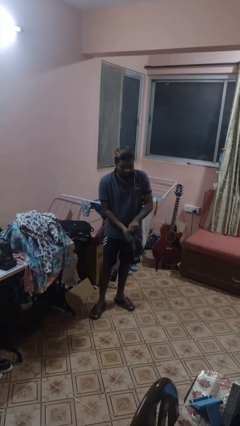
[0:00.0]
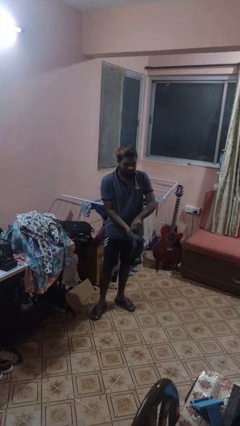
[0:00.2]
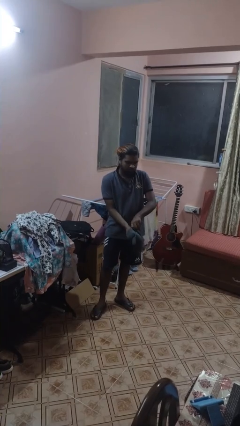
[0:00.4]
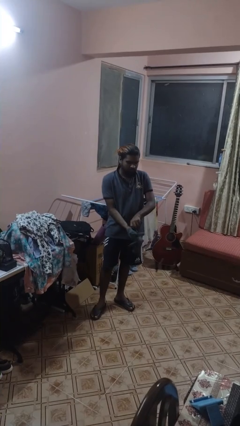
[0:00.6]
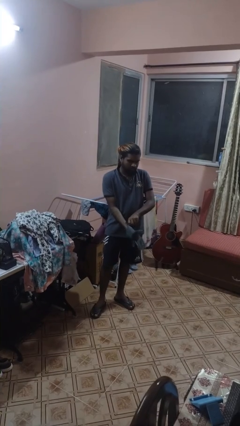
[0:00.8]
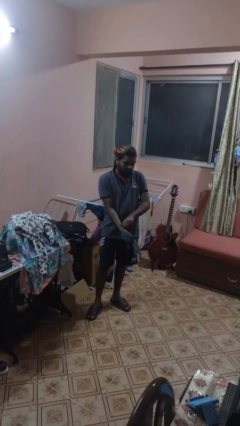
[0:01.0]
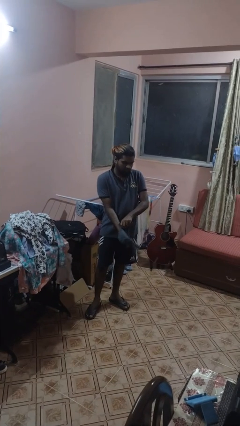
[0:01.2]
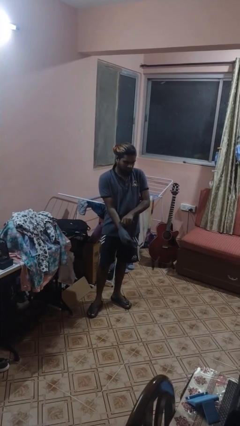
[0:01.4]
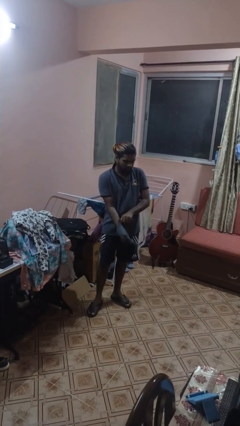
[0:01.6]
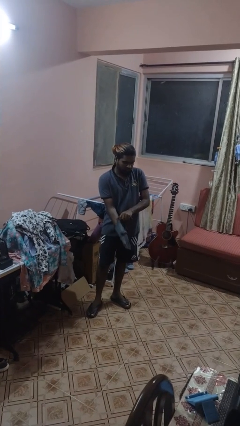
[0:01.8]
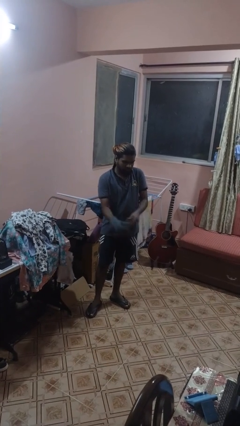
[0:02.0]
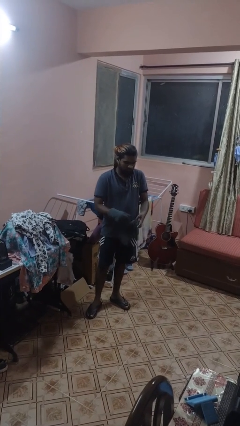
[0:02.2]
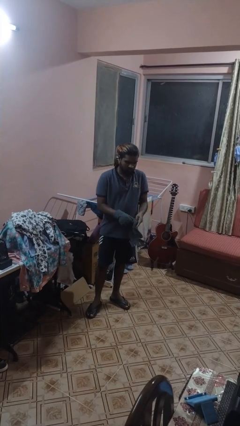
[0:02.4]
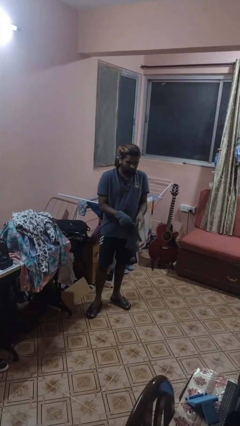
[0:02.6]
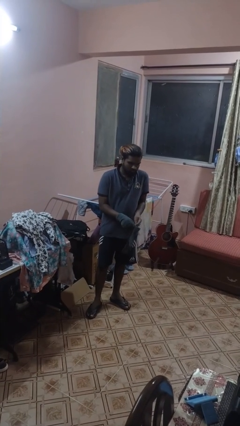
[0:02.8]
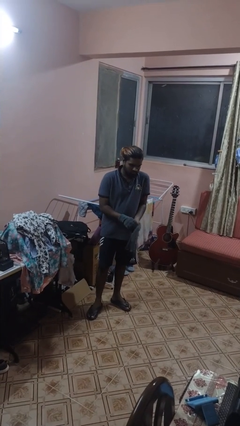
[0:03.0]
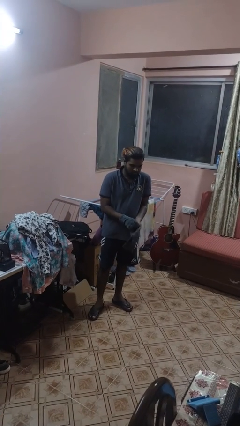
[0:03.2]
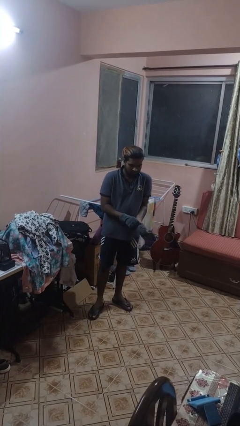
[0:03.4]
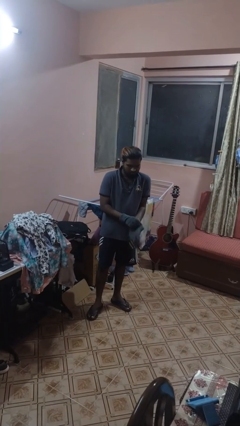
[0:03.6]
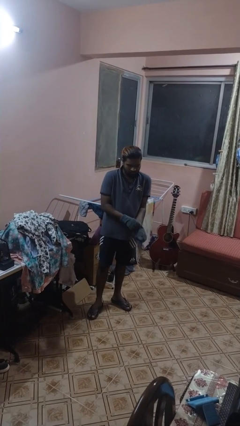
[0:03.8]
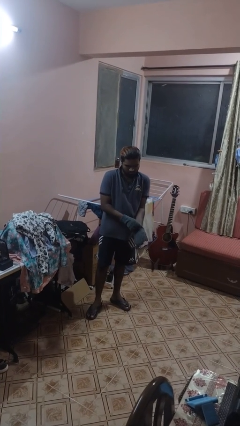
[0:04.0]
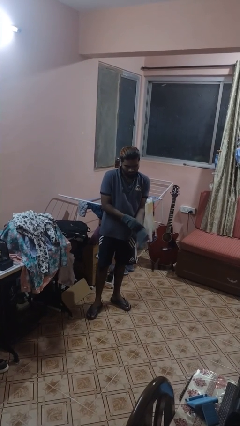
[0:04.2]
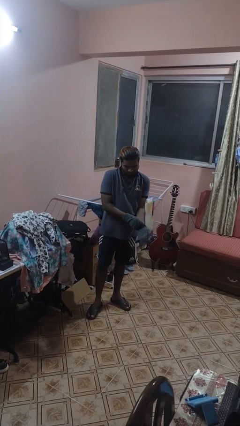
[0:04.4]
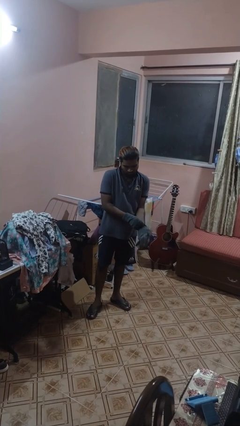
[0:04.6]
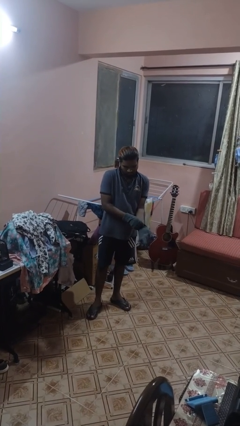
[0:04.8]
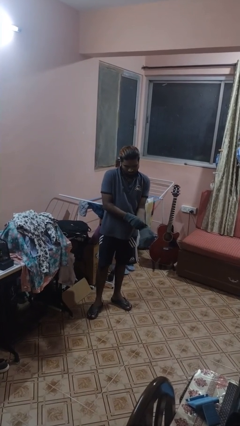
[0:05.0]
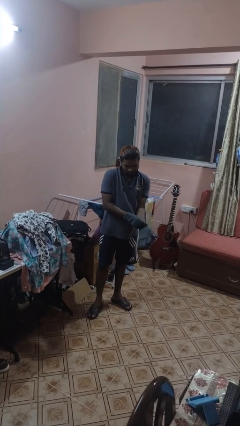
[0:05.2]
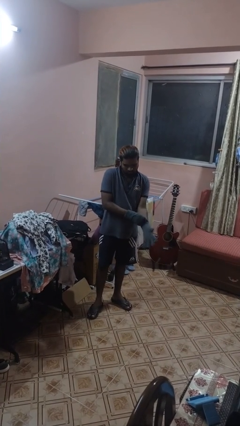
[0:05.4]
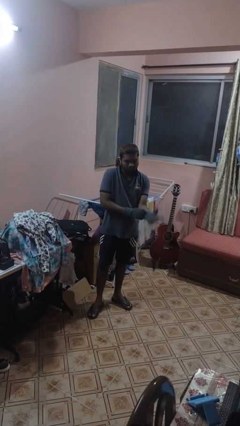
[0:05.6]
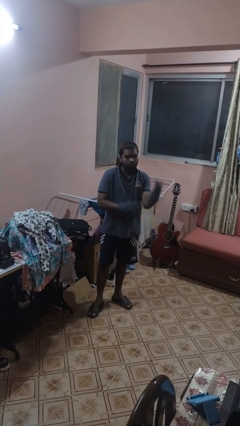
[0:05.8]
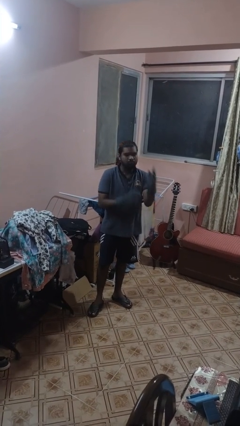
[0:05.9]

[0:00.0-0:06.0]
person puts on gloves

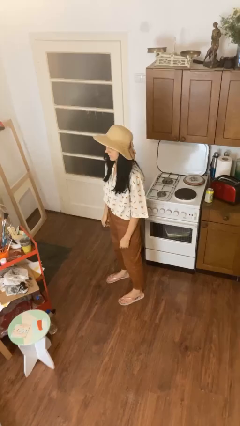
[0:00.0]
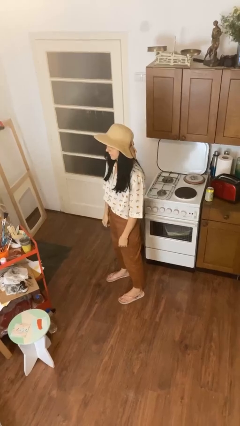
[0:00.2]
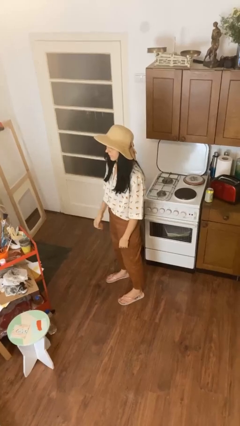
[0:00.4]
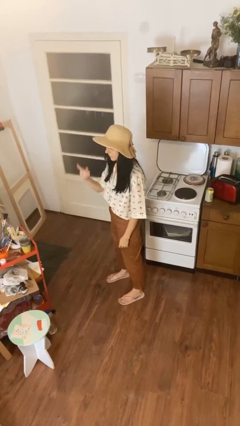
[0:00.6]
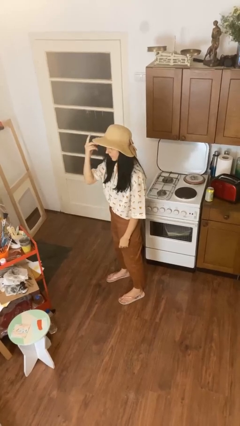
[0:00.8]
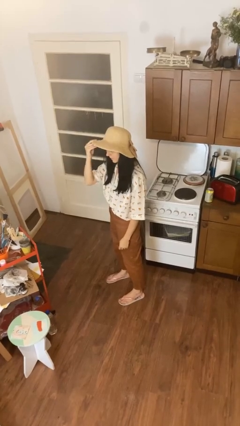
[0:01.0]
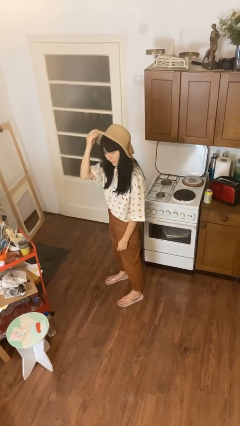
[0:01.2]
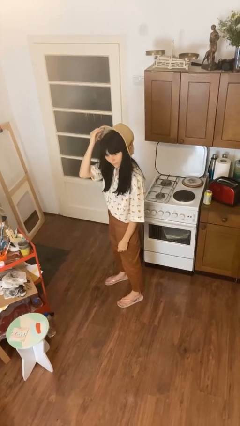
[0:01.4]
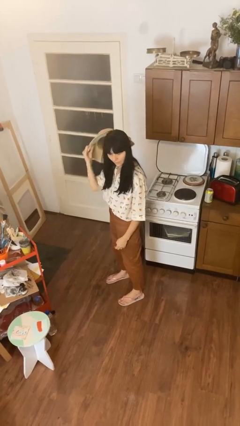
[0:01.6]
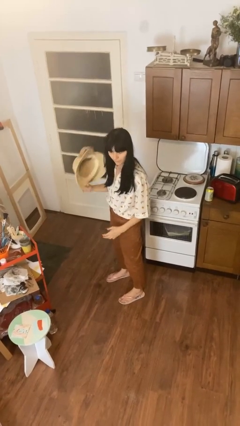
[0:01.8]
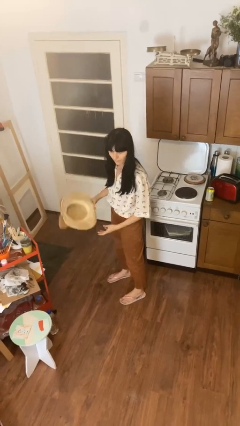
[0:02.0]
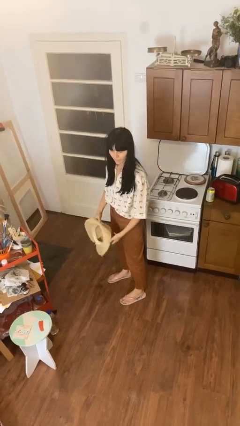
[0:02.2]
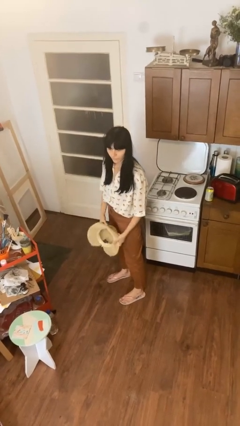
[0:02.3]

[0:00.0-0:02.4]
person takes off hat

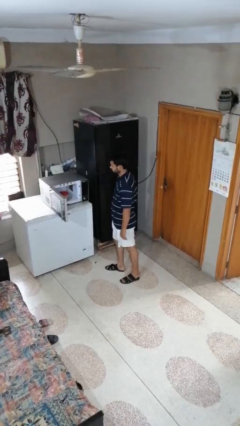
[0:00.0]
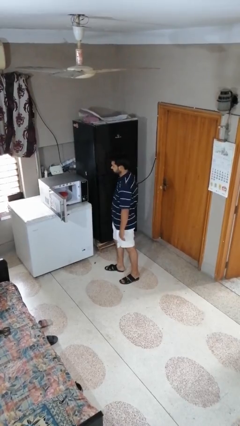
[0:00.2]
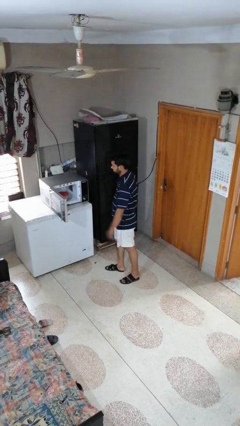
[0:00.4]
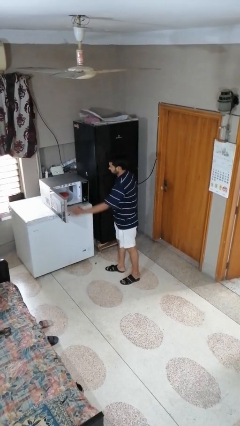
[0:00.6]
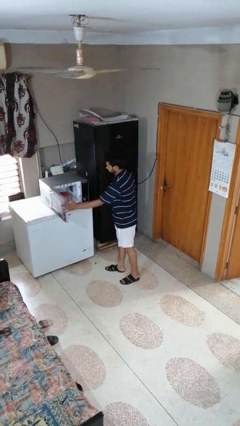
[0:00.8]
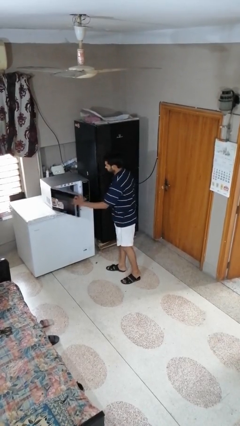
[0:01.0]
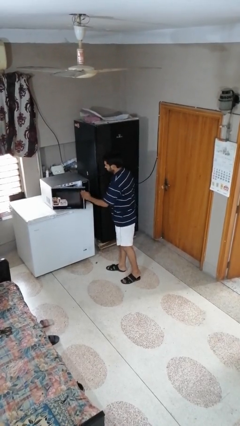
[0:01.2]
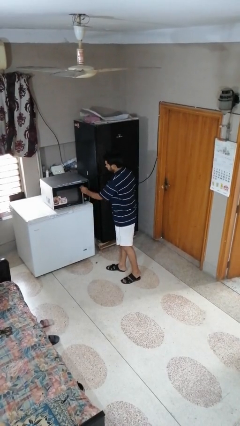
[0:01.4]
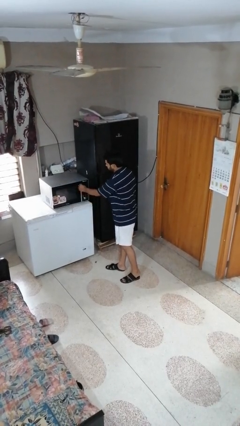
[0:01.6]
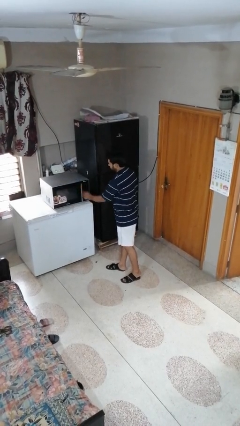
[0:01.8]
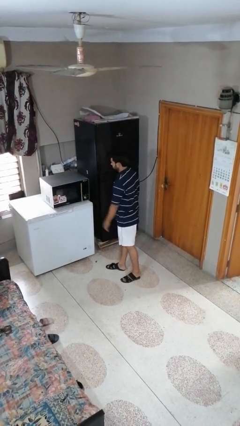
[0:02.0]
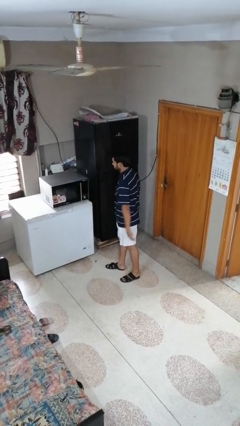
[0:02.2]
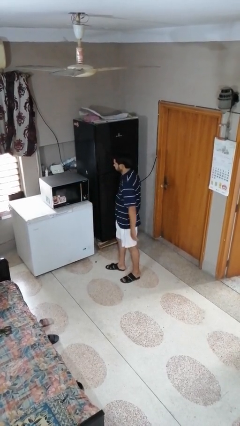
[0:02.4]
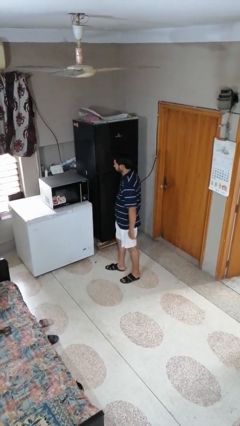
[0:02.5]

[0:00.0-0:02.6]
person closes microwave

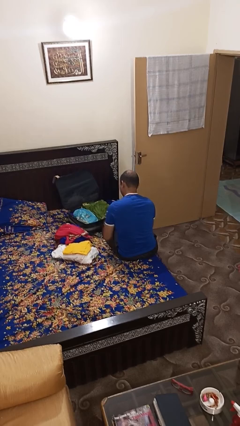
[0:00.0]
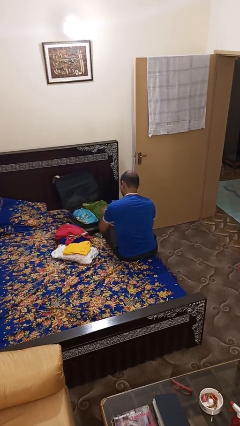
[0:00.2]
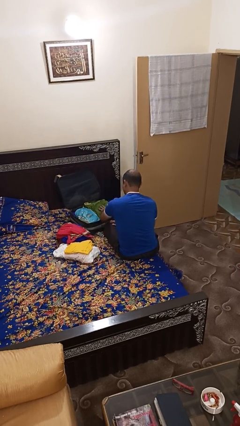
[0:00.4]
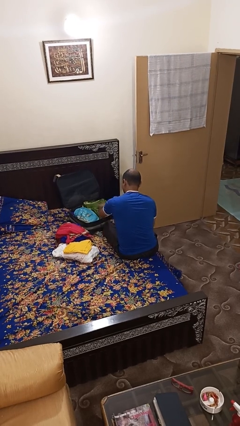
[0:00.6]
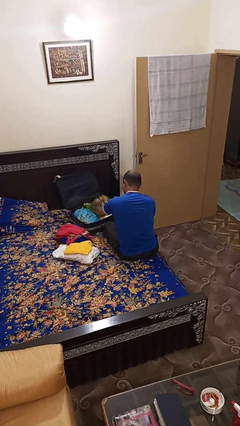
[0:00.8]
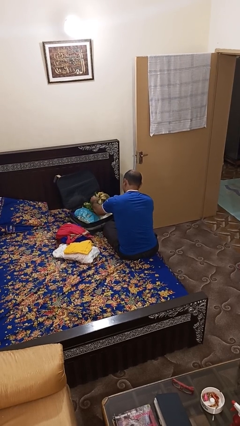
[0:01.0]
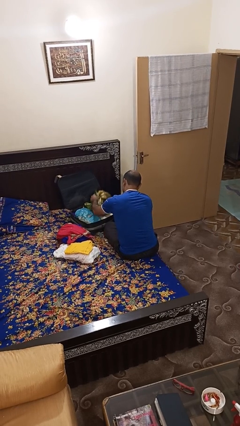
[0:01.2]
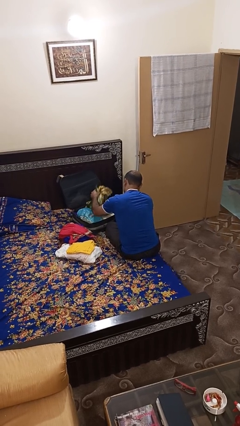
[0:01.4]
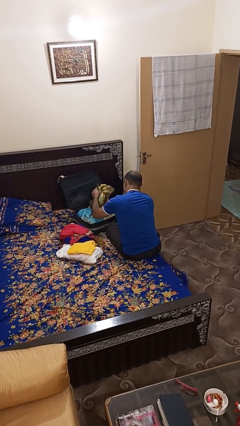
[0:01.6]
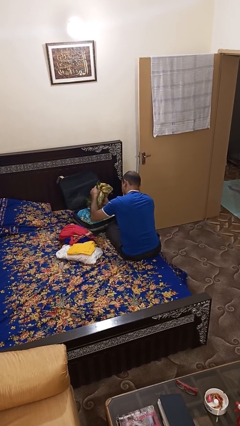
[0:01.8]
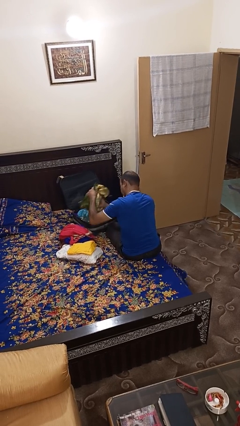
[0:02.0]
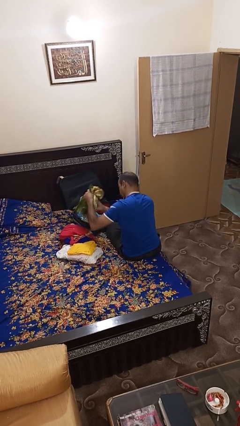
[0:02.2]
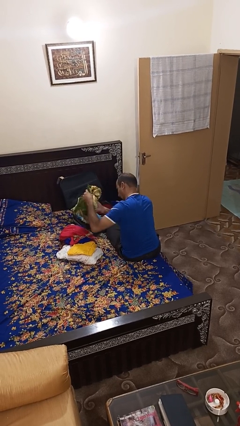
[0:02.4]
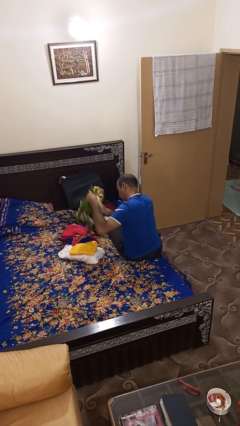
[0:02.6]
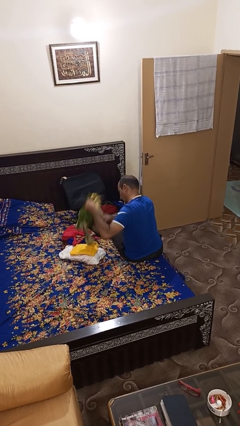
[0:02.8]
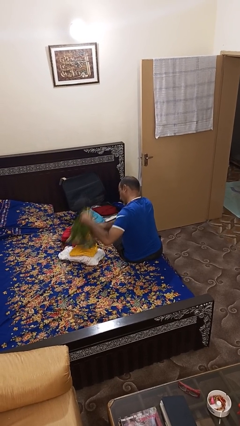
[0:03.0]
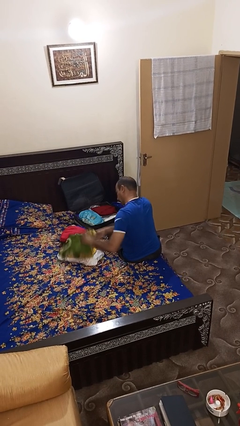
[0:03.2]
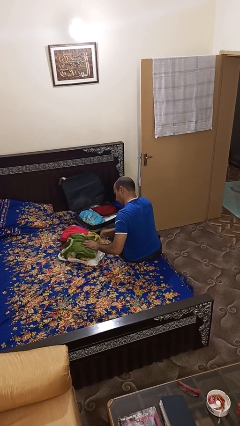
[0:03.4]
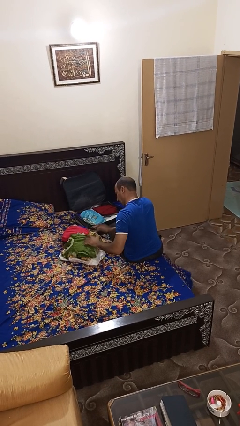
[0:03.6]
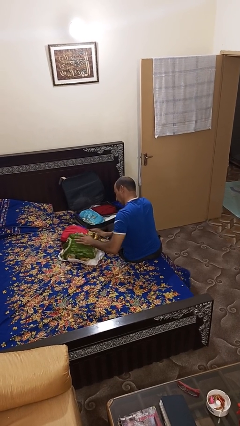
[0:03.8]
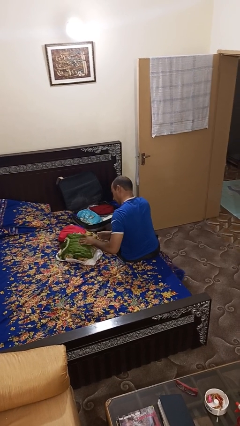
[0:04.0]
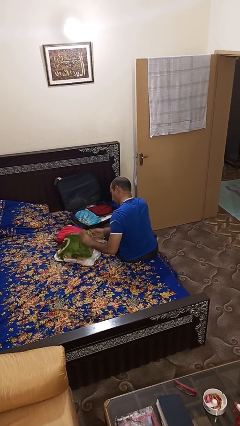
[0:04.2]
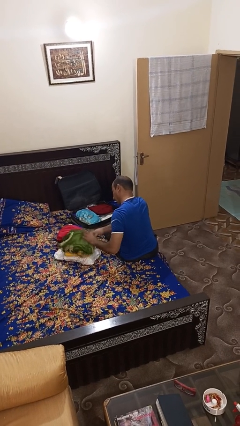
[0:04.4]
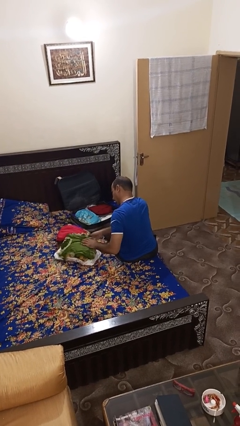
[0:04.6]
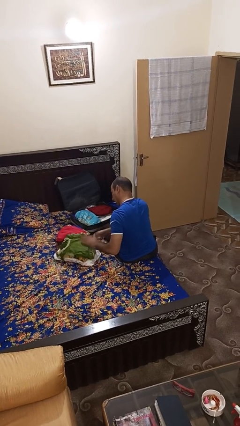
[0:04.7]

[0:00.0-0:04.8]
person unloads clothes from suitcase

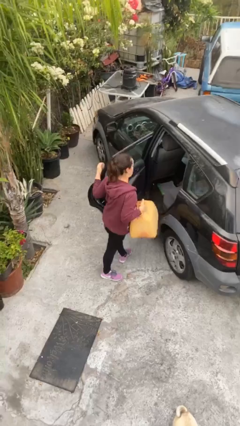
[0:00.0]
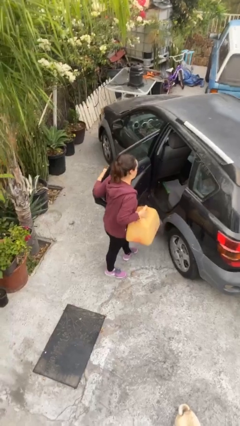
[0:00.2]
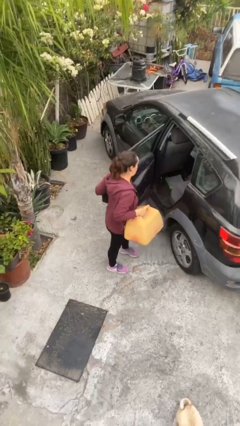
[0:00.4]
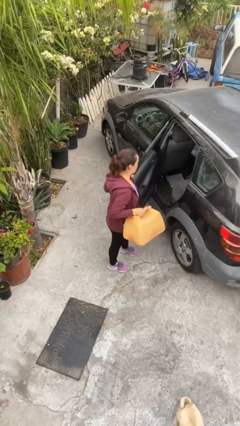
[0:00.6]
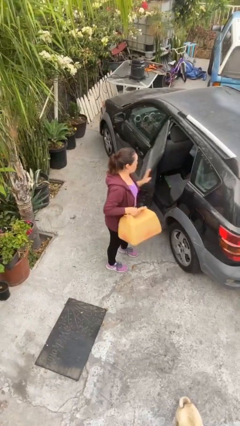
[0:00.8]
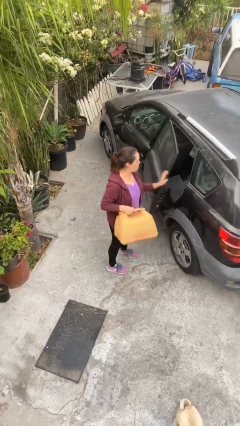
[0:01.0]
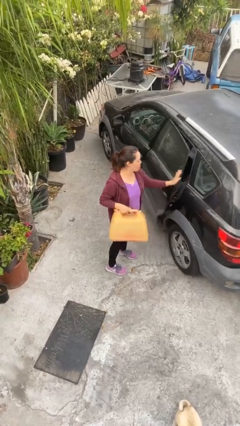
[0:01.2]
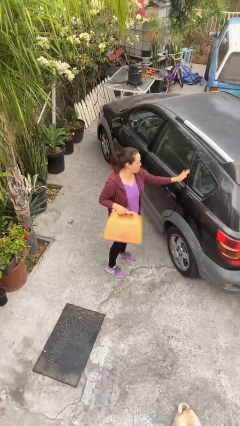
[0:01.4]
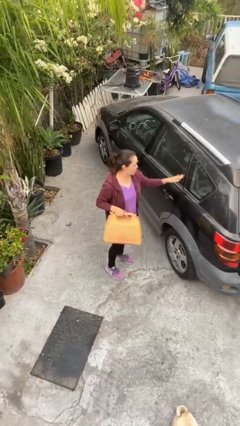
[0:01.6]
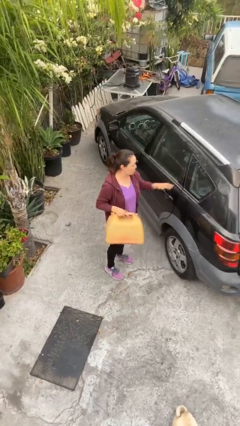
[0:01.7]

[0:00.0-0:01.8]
person closes car door
